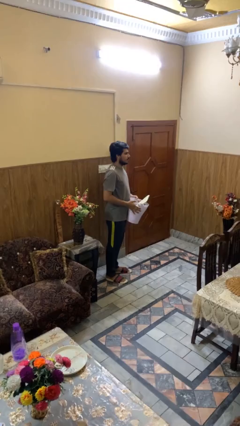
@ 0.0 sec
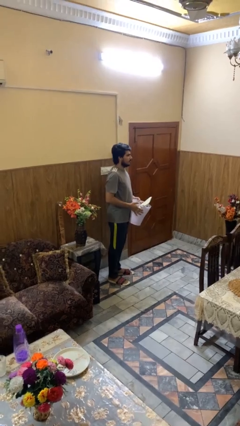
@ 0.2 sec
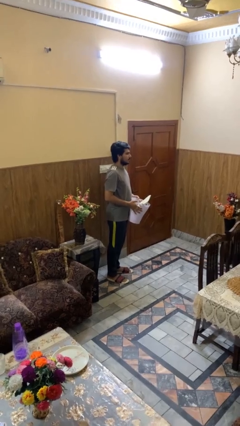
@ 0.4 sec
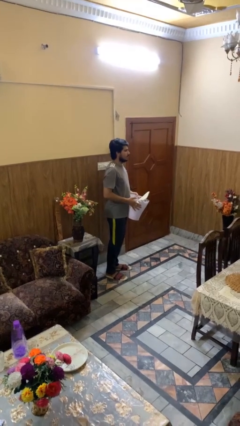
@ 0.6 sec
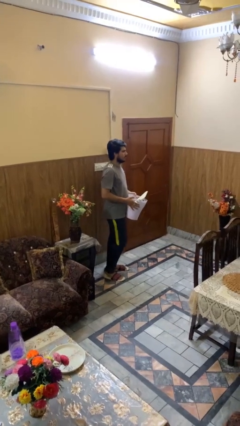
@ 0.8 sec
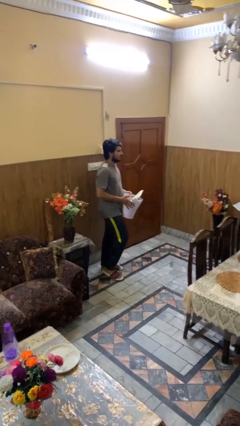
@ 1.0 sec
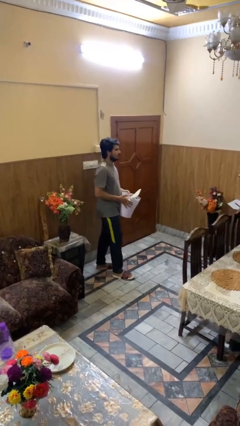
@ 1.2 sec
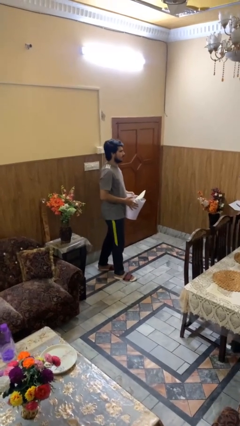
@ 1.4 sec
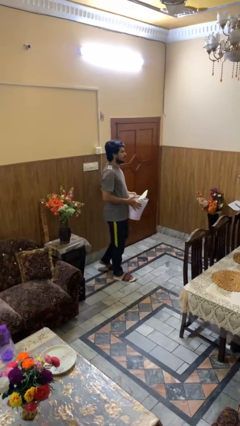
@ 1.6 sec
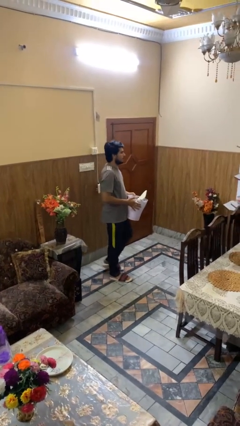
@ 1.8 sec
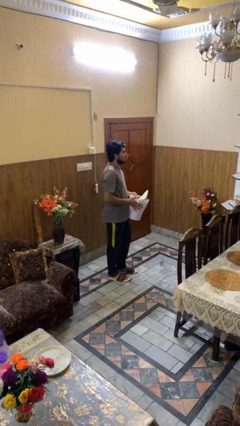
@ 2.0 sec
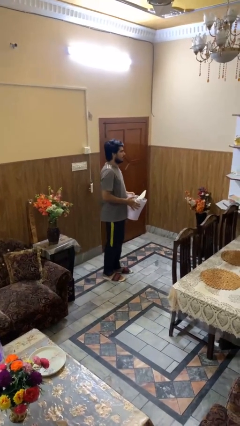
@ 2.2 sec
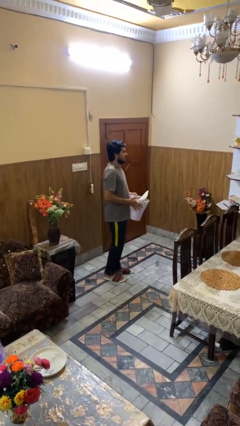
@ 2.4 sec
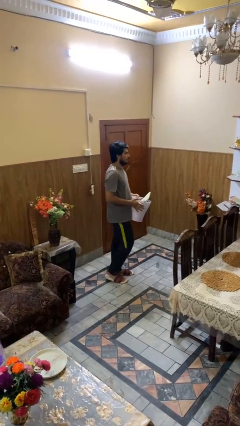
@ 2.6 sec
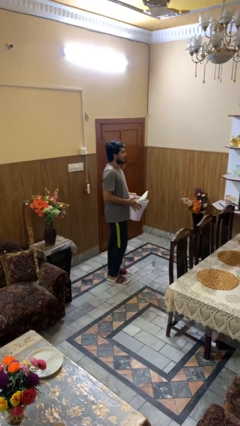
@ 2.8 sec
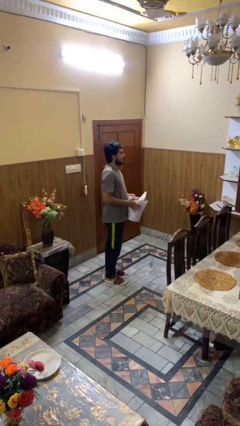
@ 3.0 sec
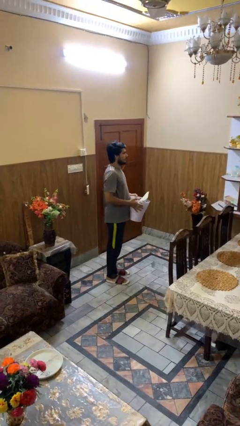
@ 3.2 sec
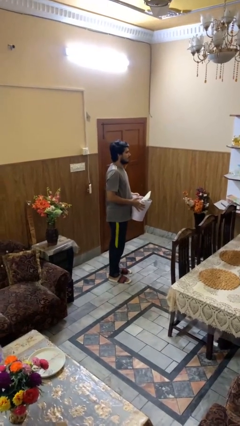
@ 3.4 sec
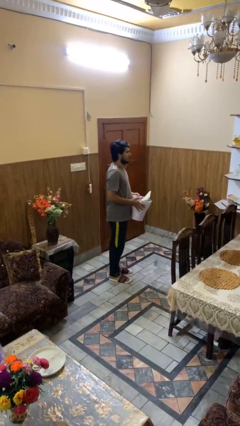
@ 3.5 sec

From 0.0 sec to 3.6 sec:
person carries laundry basket

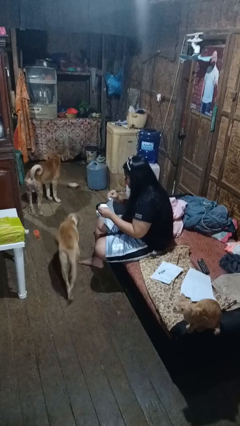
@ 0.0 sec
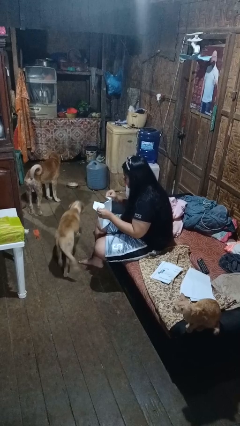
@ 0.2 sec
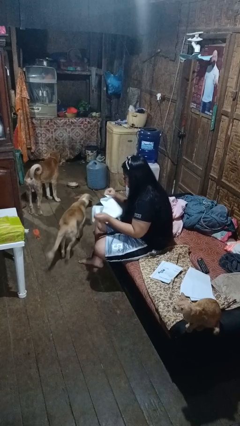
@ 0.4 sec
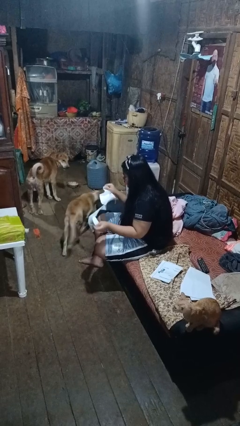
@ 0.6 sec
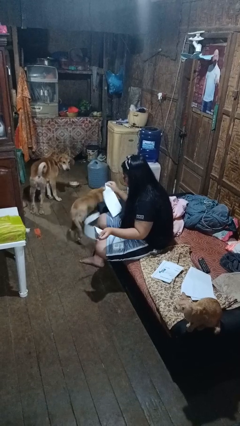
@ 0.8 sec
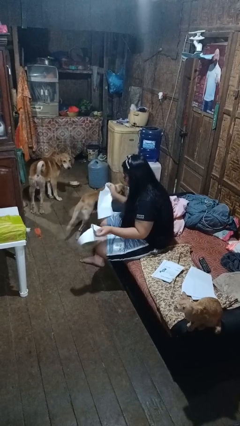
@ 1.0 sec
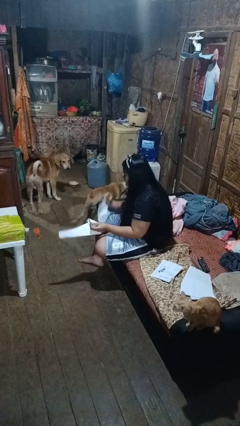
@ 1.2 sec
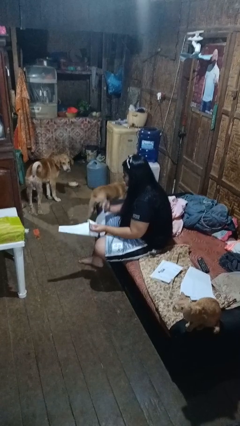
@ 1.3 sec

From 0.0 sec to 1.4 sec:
person tears paper

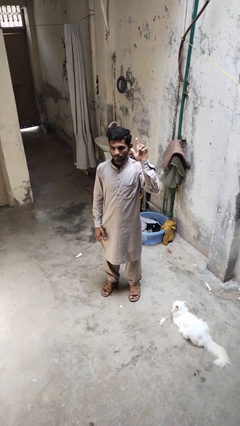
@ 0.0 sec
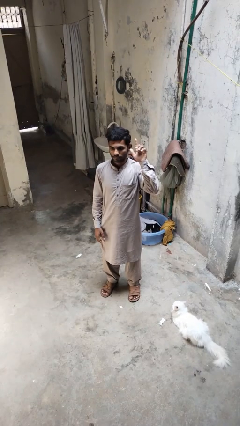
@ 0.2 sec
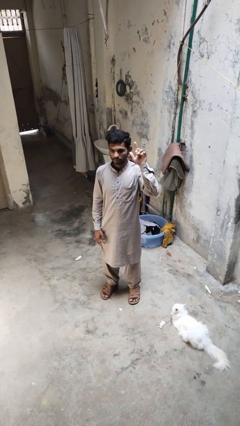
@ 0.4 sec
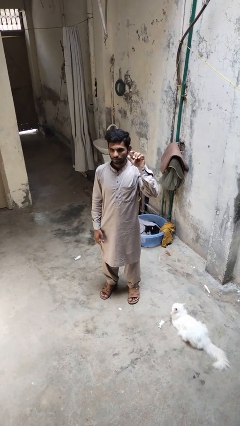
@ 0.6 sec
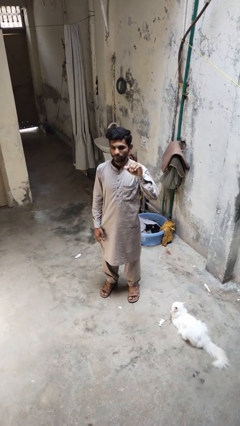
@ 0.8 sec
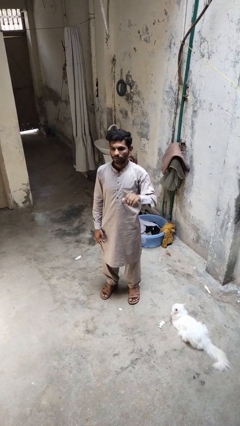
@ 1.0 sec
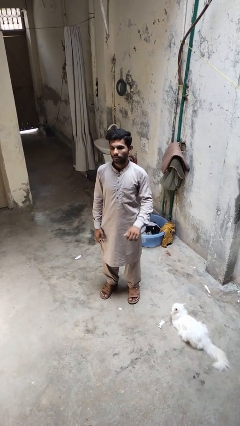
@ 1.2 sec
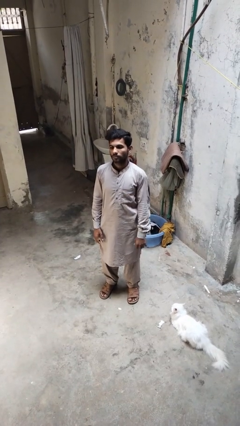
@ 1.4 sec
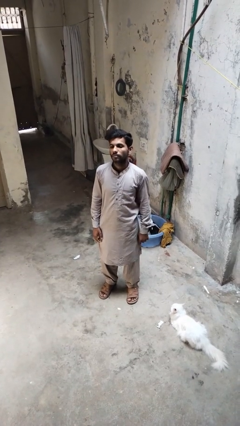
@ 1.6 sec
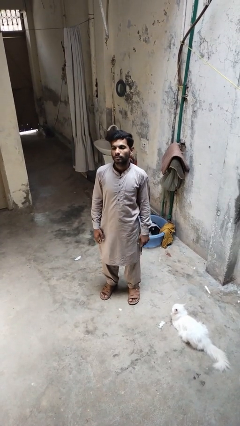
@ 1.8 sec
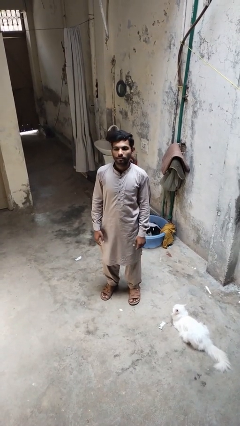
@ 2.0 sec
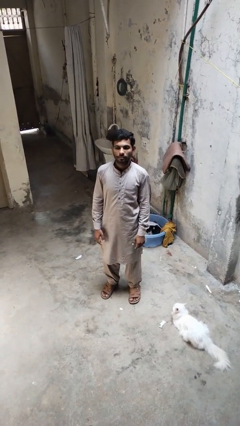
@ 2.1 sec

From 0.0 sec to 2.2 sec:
person gestures lower hand

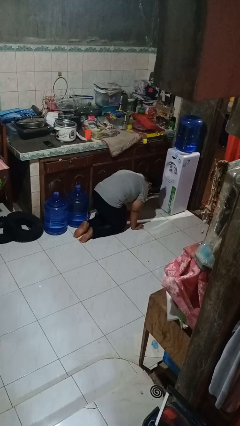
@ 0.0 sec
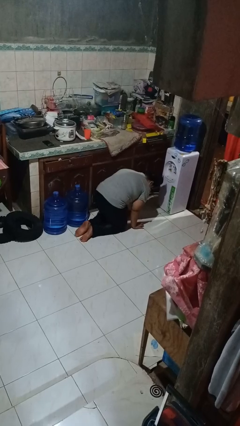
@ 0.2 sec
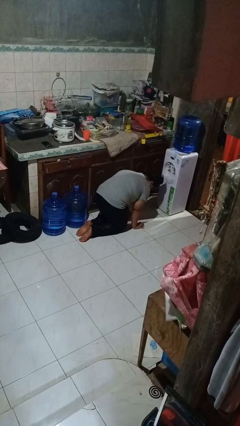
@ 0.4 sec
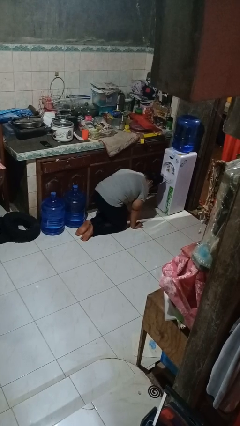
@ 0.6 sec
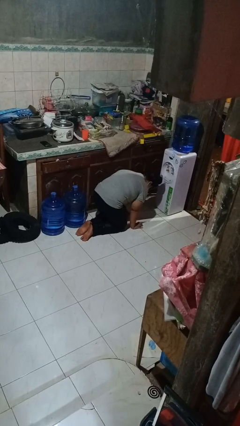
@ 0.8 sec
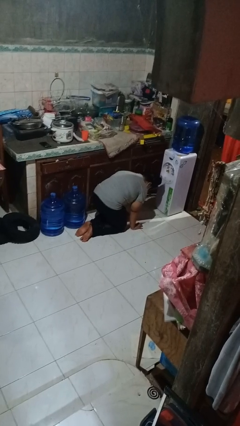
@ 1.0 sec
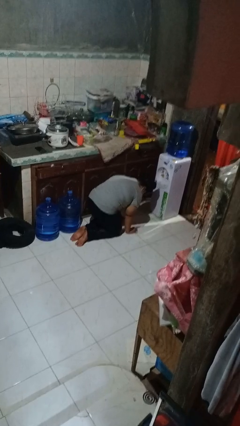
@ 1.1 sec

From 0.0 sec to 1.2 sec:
person crawls

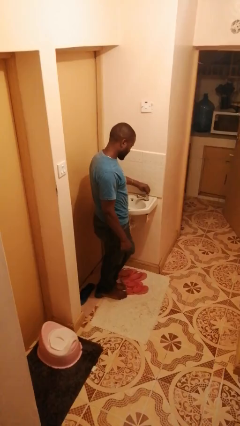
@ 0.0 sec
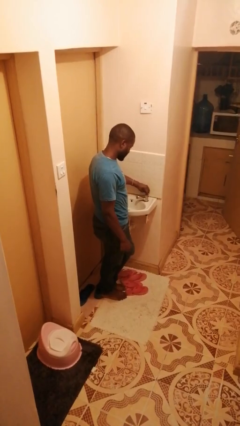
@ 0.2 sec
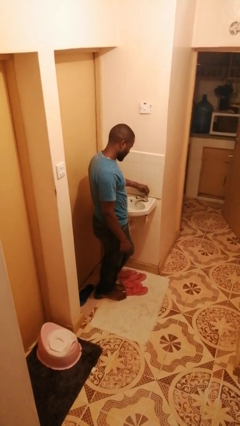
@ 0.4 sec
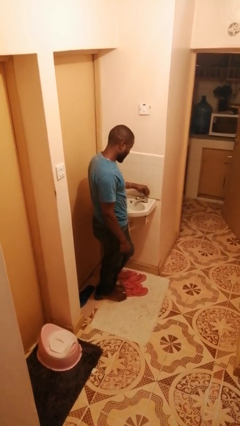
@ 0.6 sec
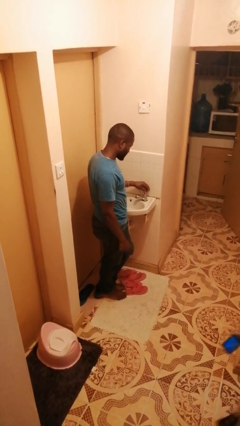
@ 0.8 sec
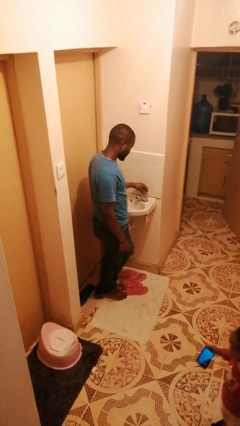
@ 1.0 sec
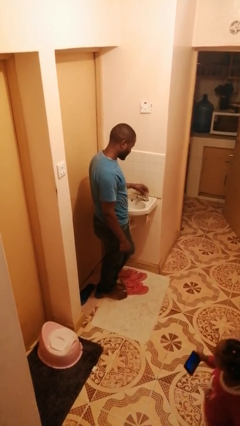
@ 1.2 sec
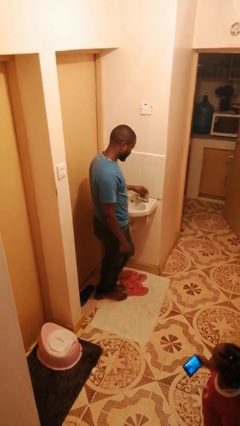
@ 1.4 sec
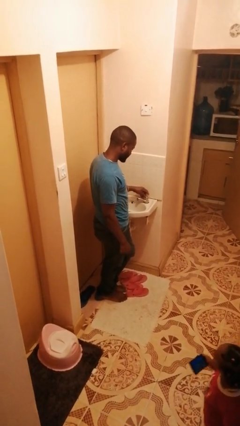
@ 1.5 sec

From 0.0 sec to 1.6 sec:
person turns off faucet

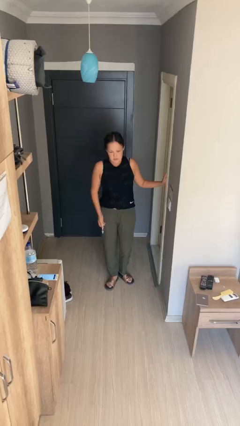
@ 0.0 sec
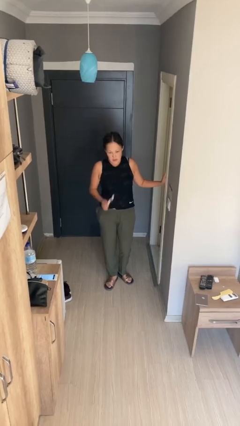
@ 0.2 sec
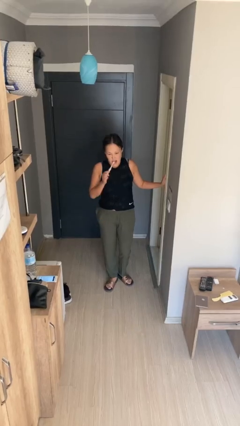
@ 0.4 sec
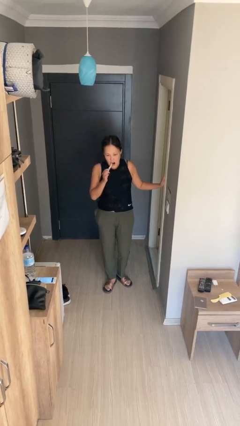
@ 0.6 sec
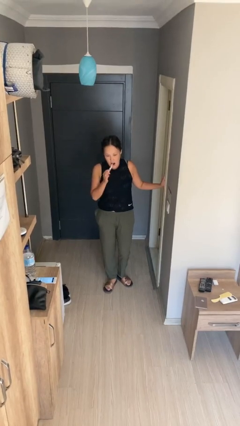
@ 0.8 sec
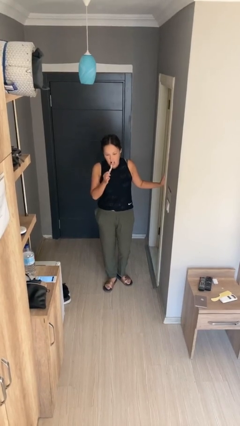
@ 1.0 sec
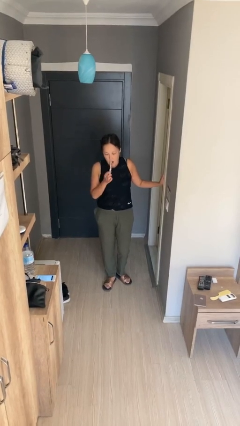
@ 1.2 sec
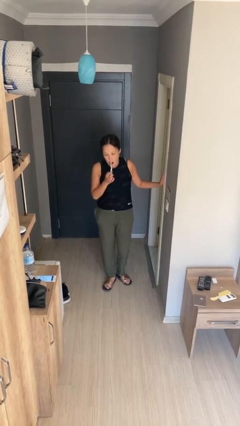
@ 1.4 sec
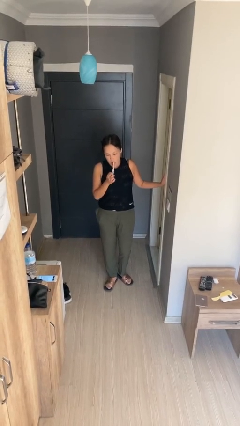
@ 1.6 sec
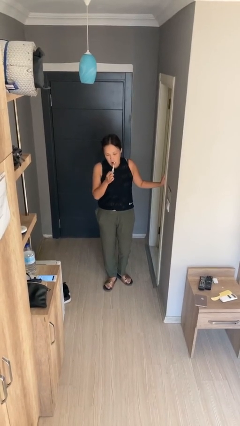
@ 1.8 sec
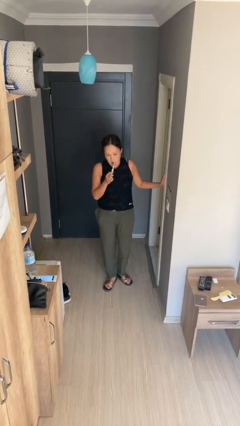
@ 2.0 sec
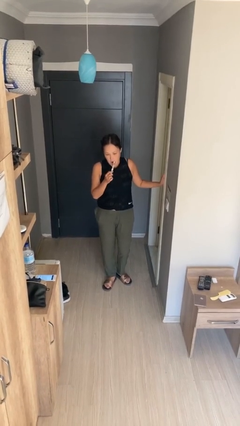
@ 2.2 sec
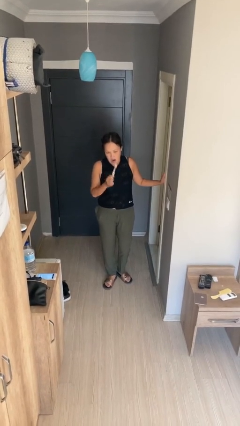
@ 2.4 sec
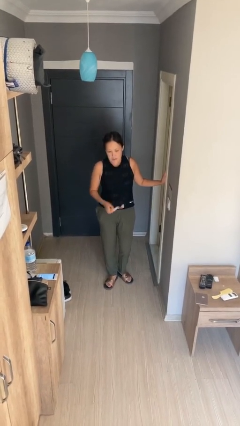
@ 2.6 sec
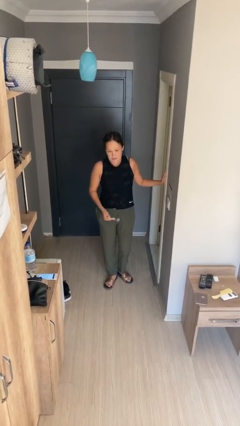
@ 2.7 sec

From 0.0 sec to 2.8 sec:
person brushes teeth

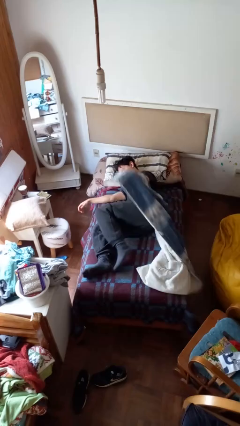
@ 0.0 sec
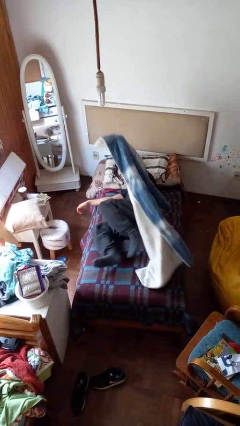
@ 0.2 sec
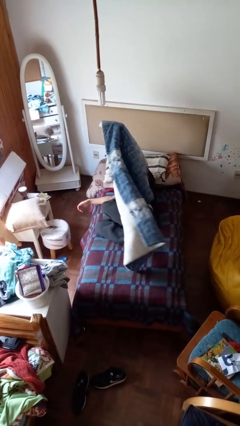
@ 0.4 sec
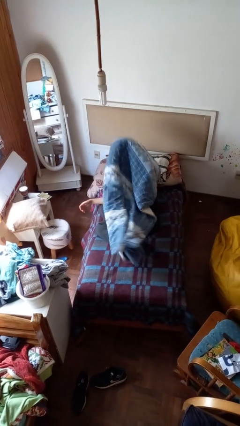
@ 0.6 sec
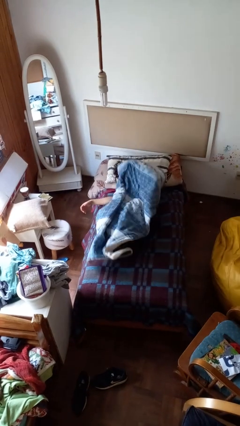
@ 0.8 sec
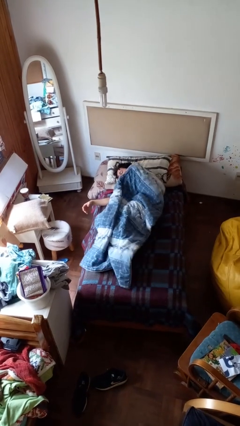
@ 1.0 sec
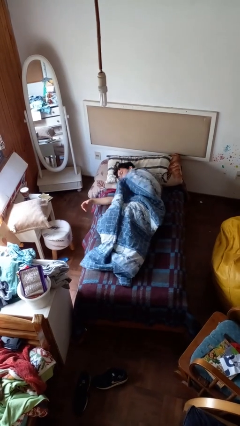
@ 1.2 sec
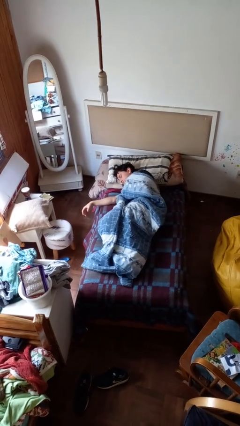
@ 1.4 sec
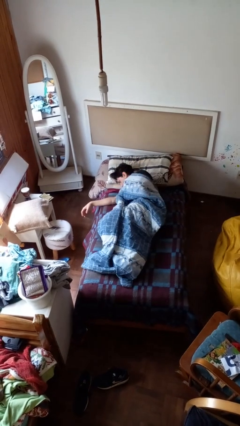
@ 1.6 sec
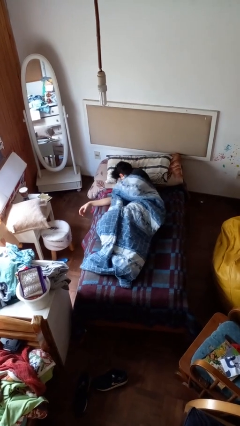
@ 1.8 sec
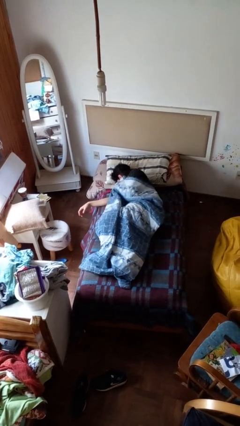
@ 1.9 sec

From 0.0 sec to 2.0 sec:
person covers with bedsheets

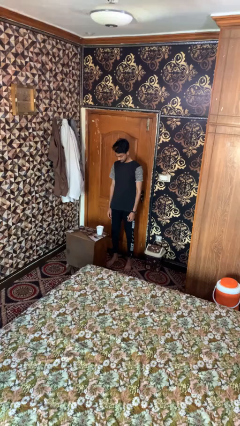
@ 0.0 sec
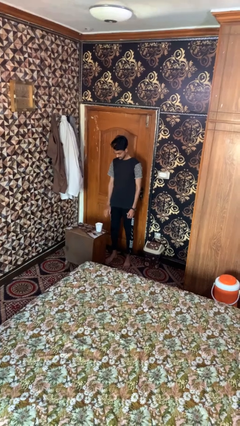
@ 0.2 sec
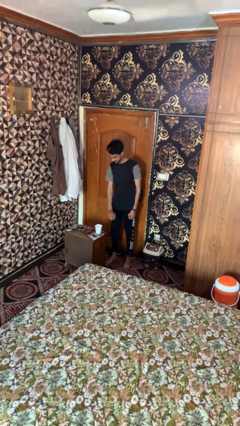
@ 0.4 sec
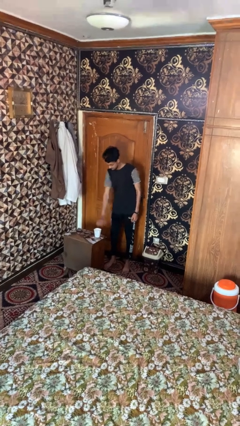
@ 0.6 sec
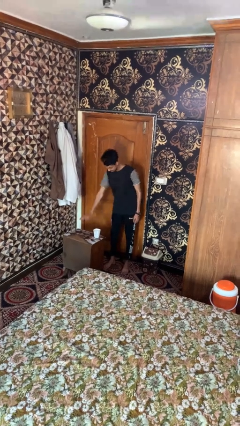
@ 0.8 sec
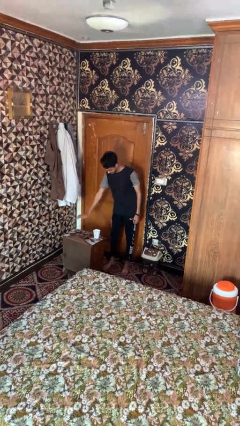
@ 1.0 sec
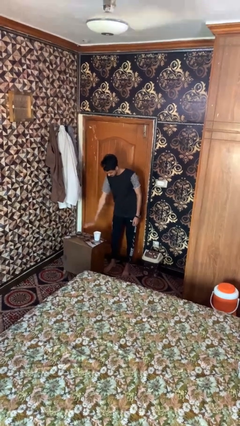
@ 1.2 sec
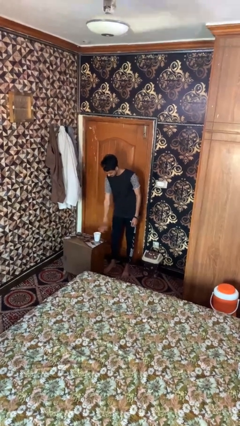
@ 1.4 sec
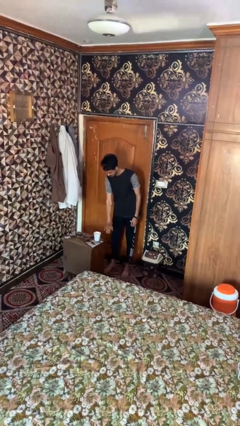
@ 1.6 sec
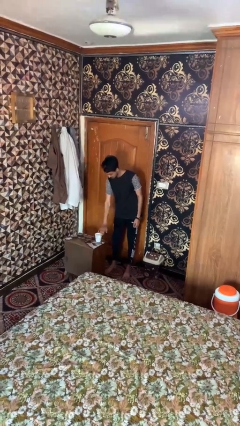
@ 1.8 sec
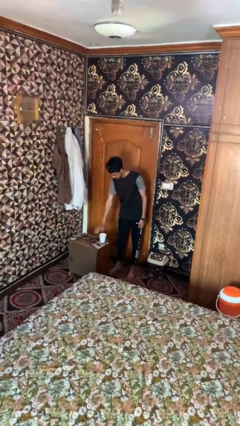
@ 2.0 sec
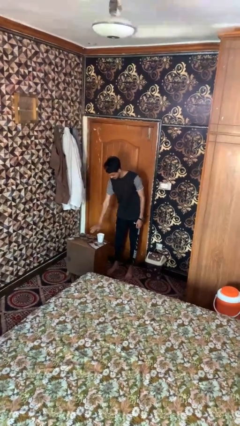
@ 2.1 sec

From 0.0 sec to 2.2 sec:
person waves hand over object
